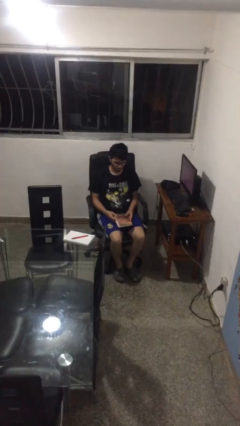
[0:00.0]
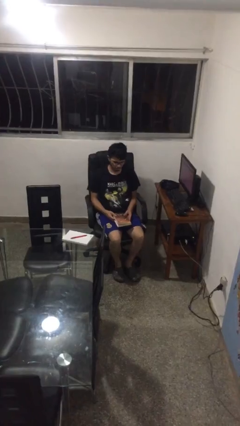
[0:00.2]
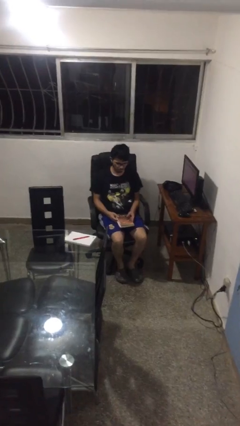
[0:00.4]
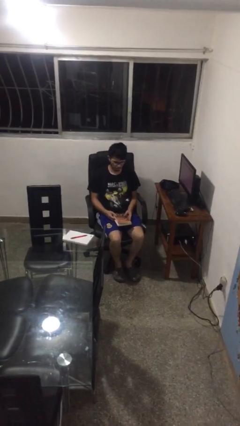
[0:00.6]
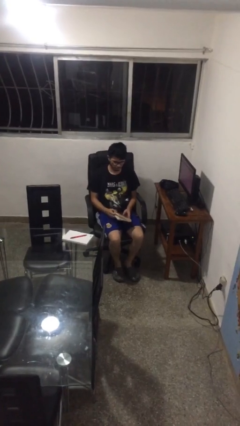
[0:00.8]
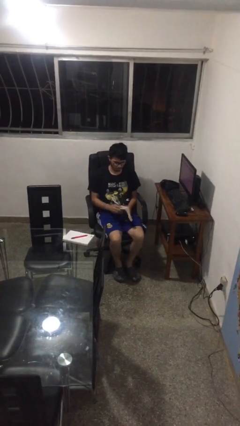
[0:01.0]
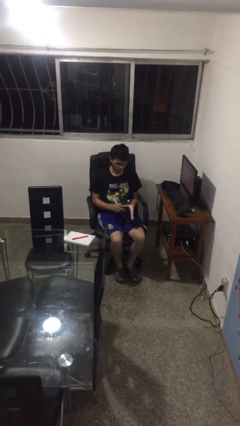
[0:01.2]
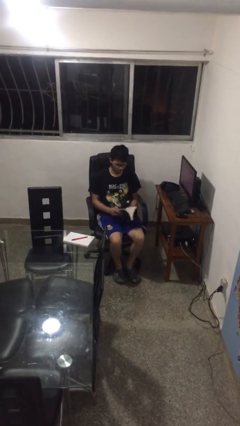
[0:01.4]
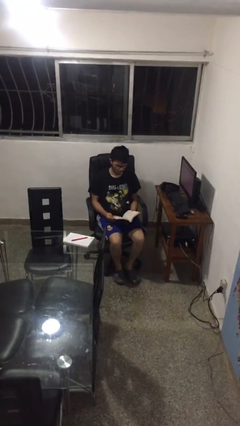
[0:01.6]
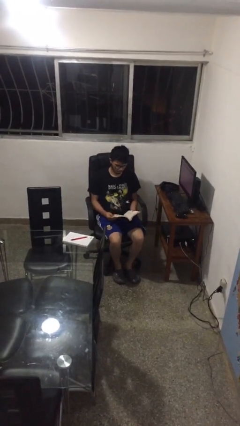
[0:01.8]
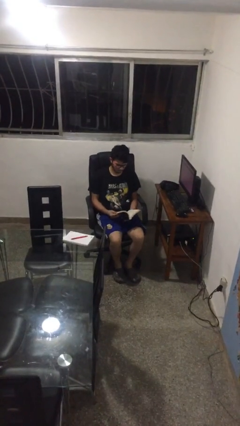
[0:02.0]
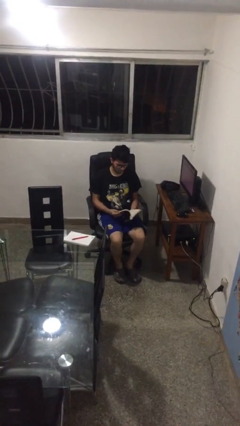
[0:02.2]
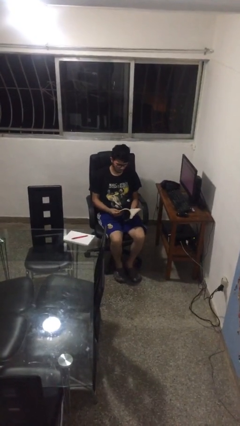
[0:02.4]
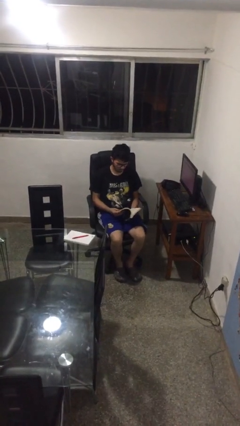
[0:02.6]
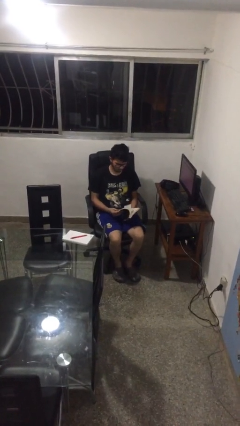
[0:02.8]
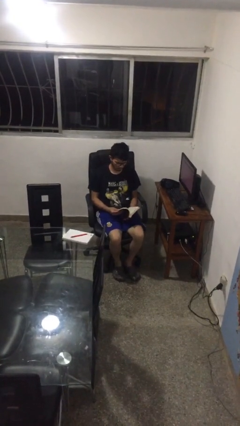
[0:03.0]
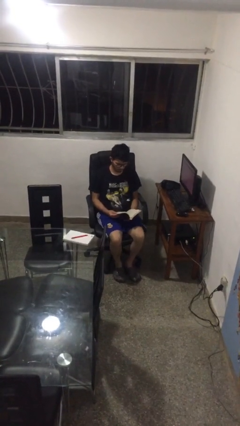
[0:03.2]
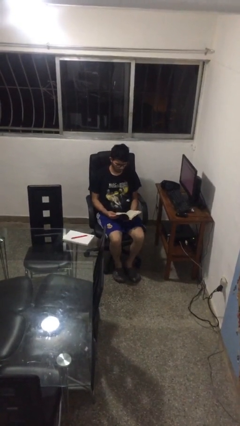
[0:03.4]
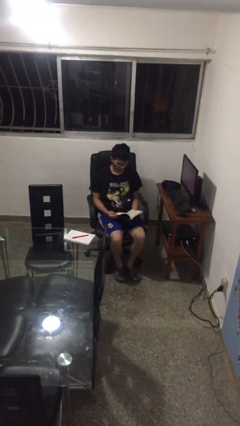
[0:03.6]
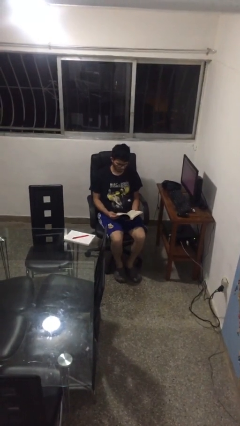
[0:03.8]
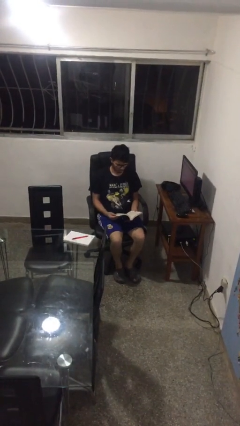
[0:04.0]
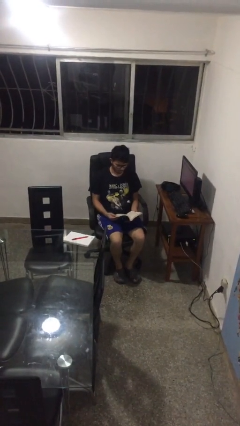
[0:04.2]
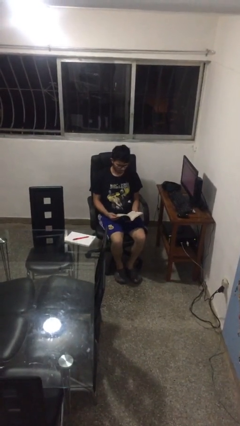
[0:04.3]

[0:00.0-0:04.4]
person reads book

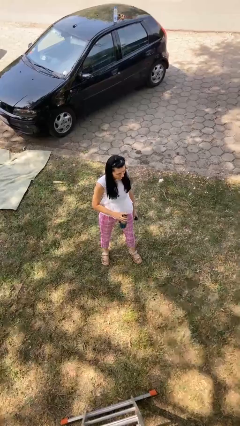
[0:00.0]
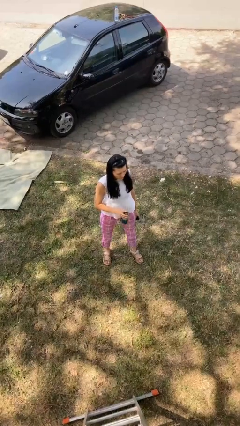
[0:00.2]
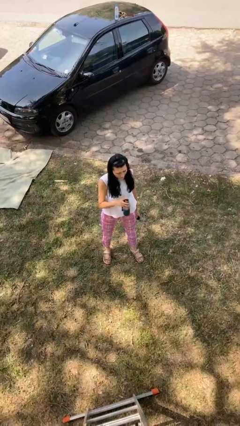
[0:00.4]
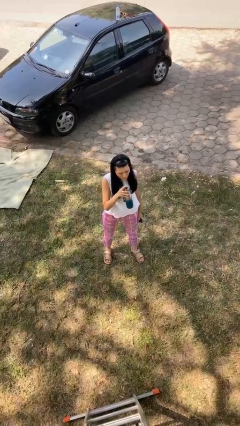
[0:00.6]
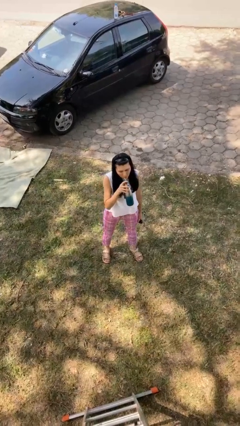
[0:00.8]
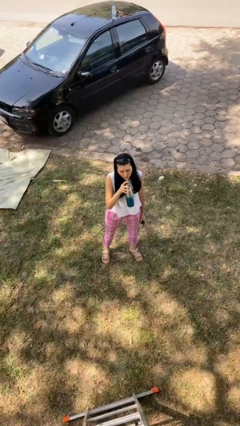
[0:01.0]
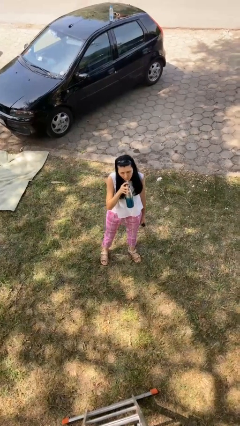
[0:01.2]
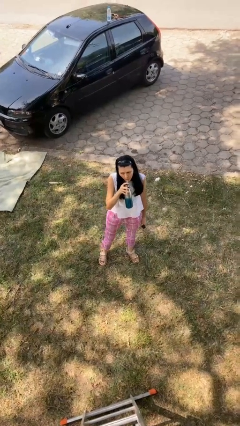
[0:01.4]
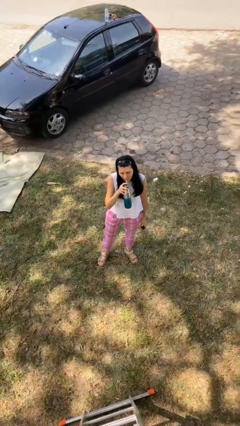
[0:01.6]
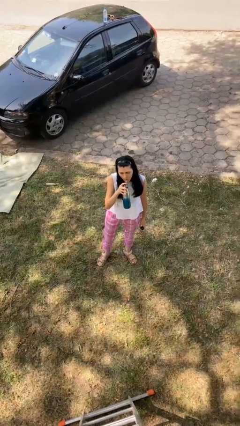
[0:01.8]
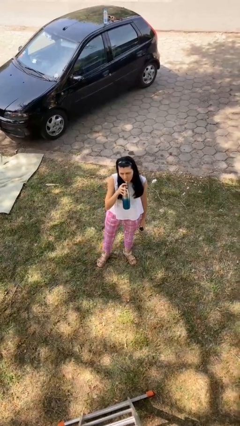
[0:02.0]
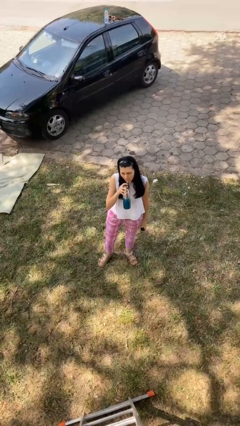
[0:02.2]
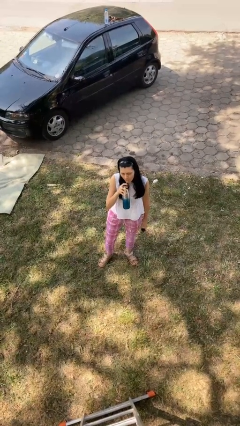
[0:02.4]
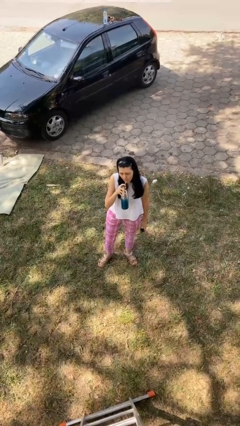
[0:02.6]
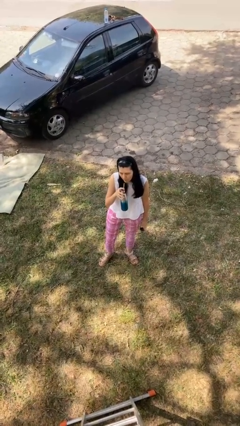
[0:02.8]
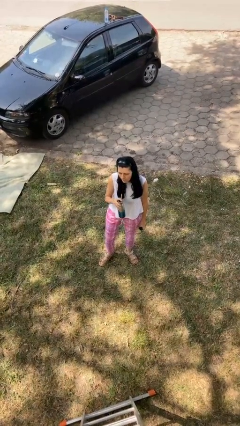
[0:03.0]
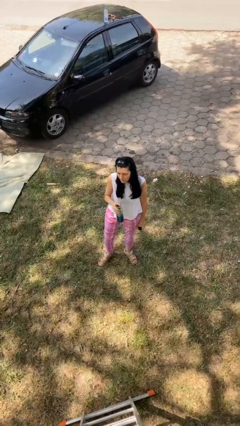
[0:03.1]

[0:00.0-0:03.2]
person drinks from straw

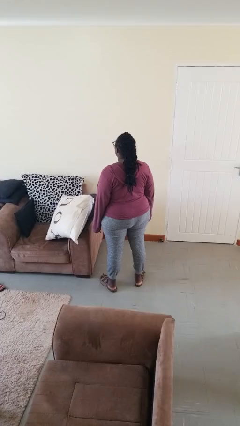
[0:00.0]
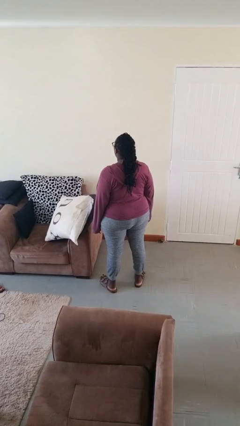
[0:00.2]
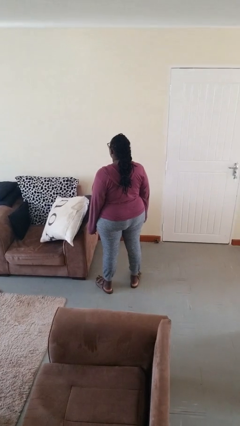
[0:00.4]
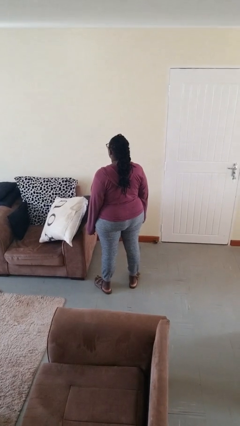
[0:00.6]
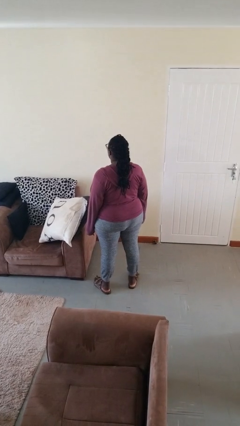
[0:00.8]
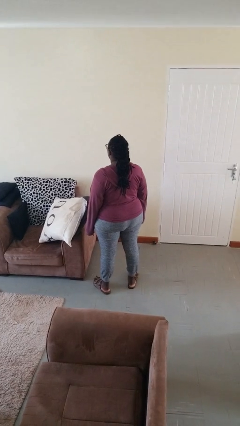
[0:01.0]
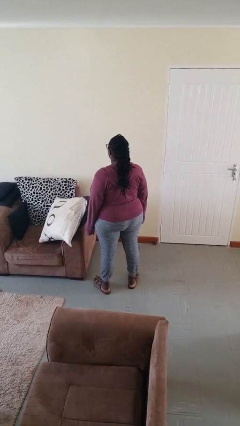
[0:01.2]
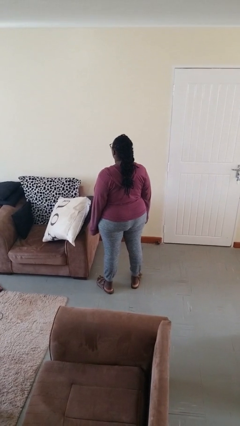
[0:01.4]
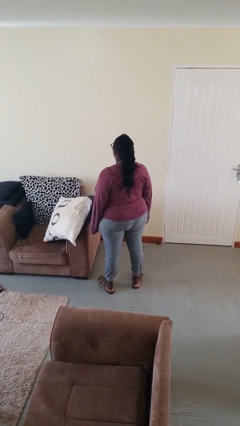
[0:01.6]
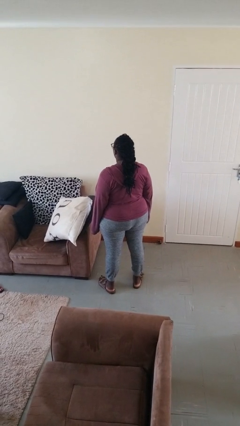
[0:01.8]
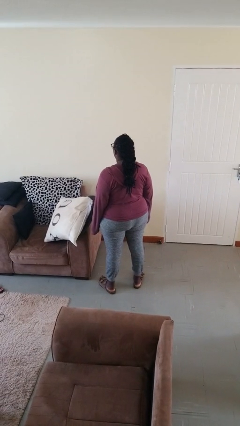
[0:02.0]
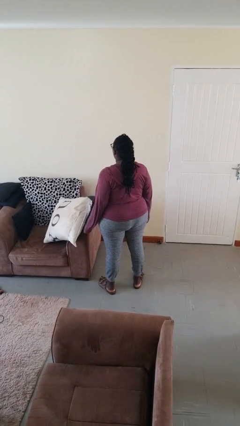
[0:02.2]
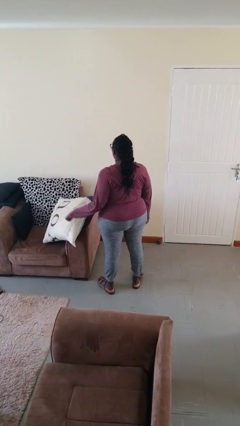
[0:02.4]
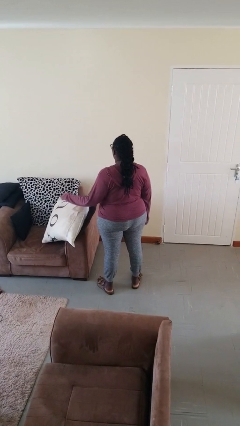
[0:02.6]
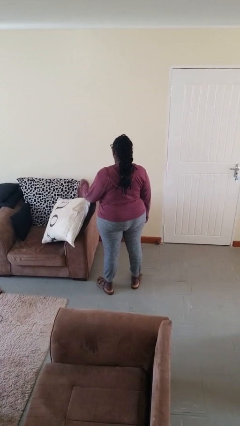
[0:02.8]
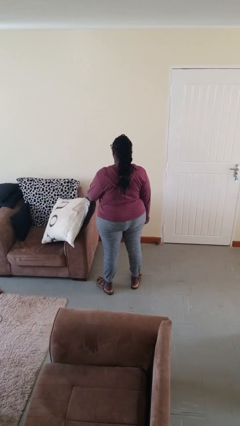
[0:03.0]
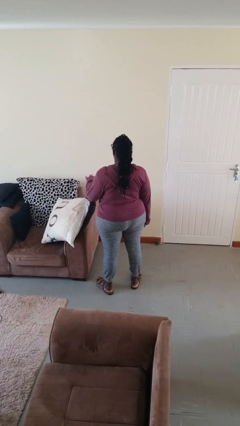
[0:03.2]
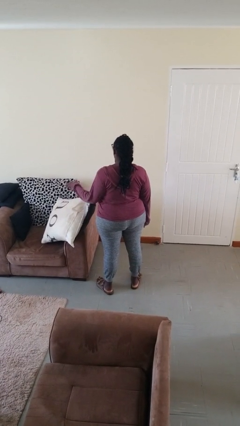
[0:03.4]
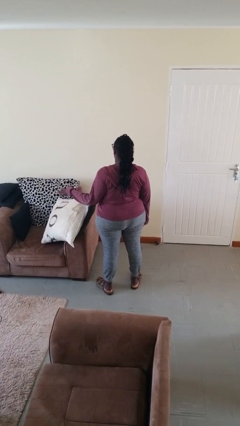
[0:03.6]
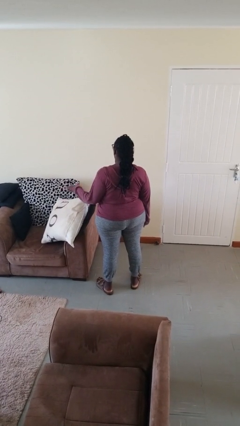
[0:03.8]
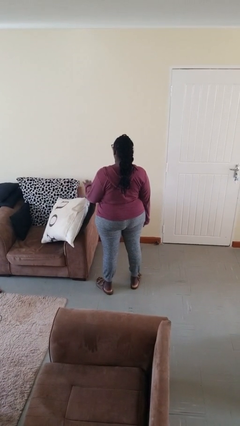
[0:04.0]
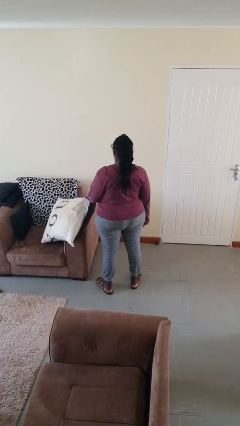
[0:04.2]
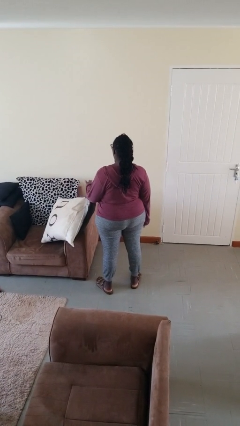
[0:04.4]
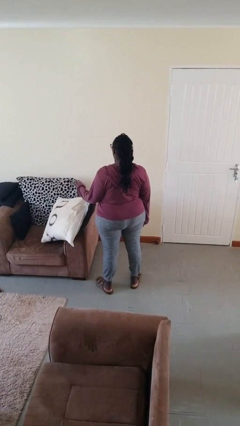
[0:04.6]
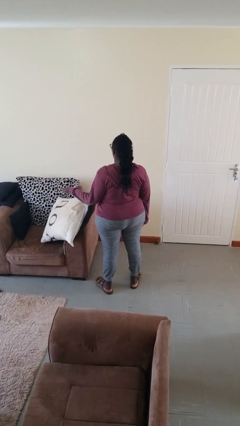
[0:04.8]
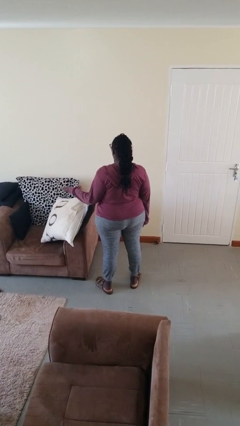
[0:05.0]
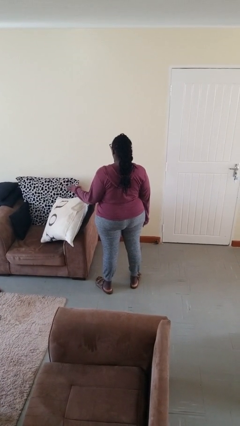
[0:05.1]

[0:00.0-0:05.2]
person waves hand over object

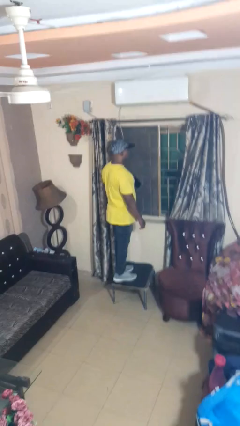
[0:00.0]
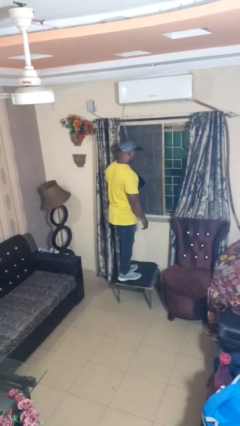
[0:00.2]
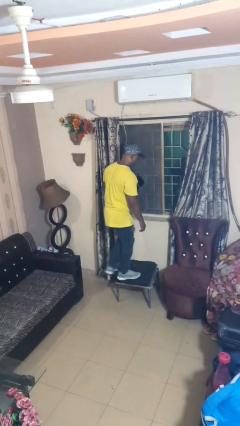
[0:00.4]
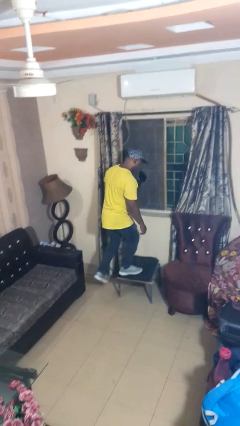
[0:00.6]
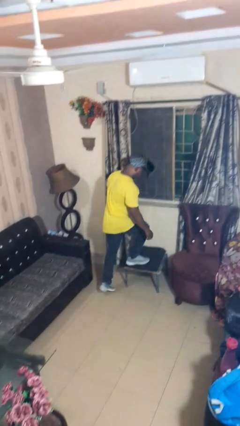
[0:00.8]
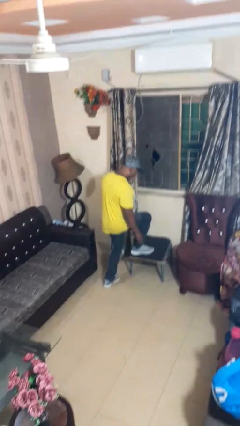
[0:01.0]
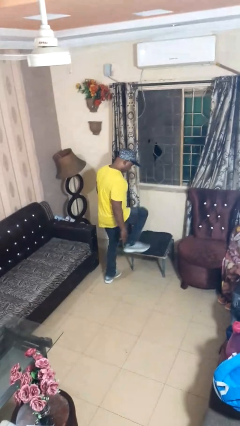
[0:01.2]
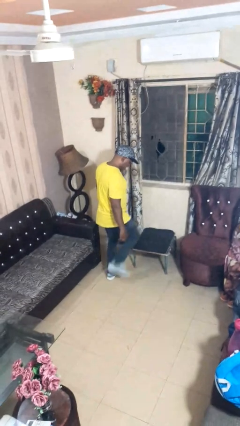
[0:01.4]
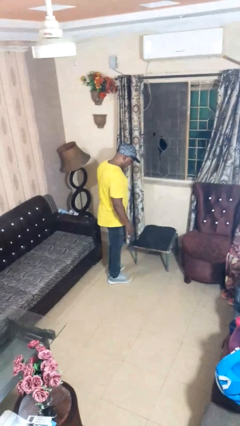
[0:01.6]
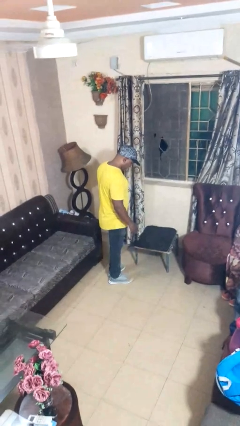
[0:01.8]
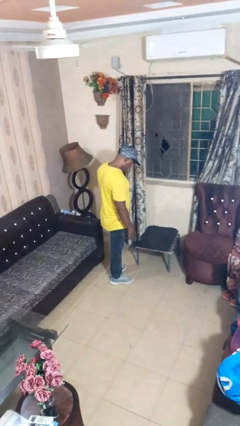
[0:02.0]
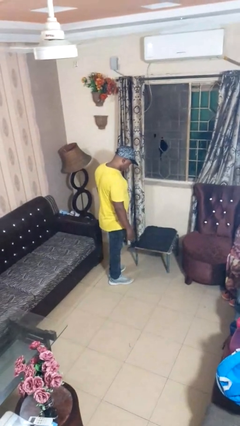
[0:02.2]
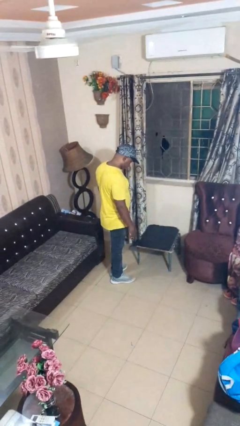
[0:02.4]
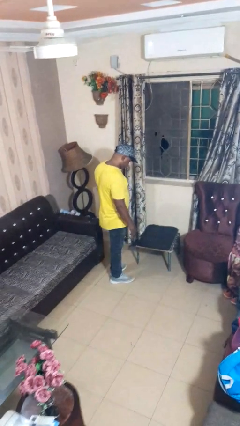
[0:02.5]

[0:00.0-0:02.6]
person climbs off table

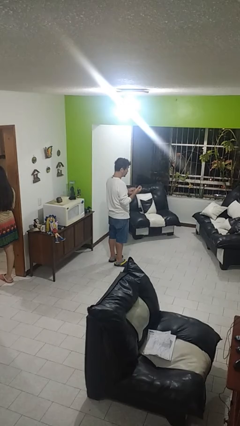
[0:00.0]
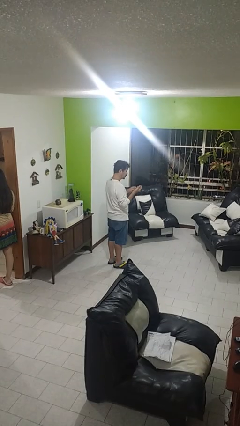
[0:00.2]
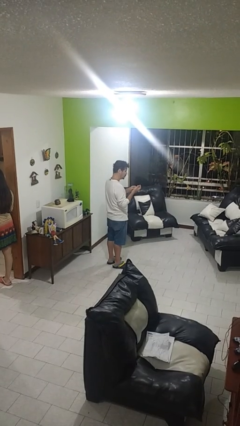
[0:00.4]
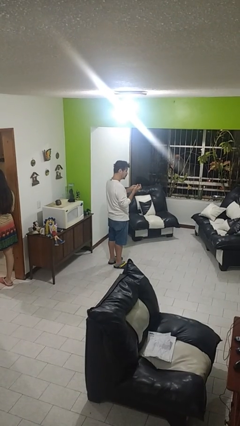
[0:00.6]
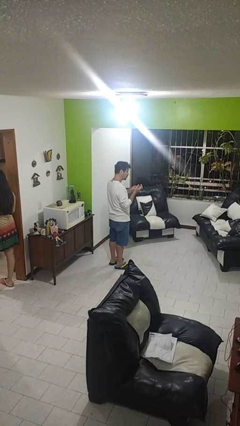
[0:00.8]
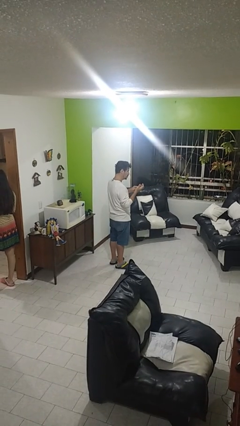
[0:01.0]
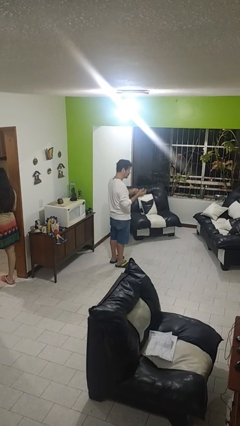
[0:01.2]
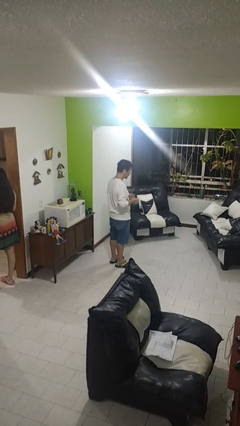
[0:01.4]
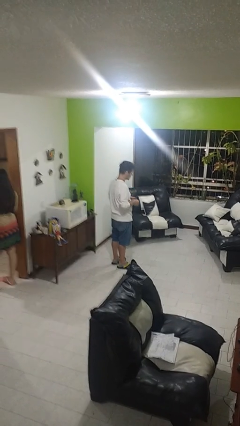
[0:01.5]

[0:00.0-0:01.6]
person files fingernails

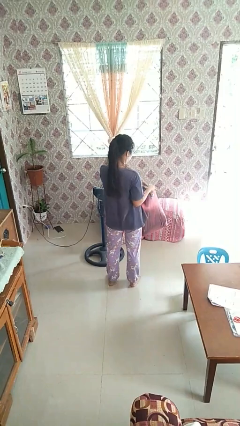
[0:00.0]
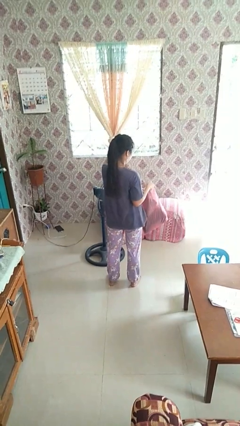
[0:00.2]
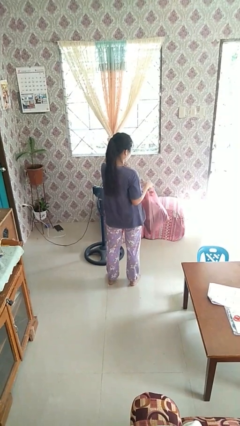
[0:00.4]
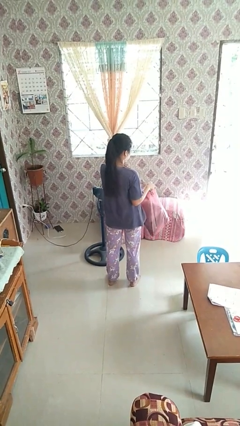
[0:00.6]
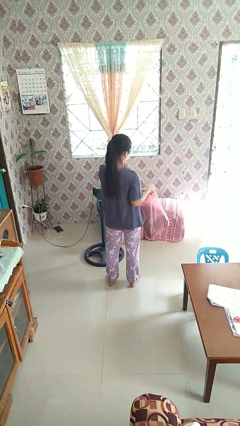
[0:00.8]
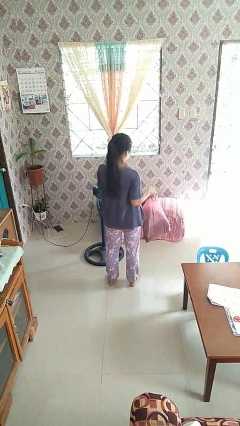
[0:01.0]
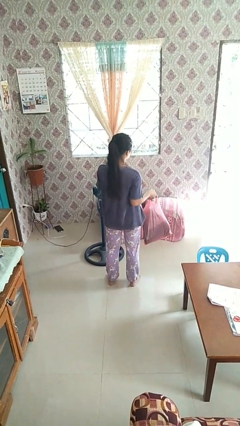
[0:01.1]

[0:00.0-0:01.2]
person puts object into bag
